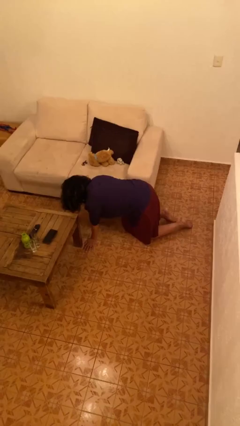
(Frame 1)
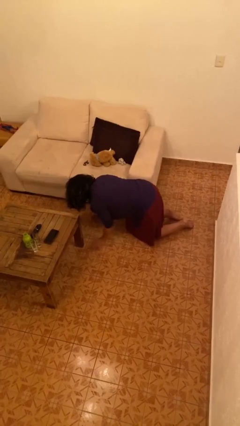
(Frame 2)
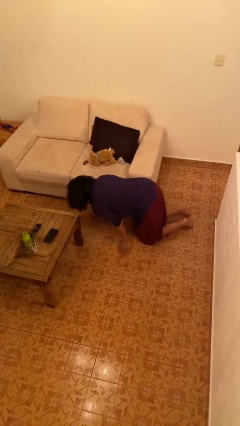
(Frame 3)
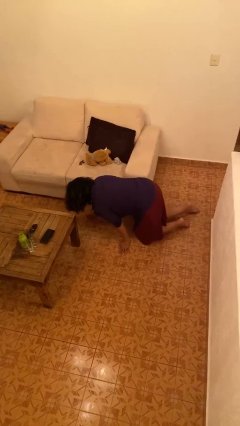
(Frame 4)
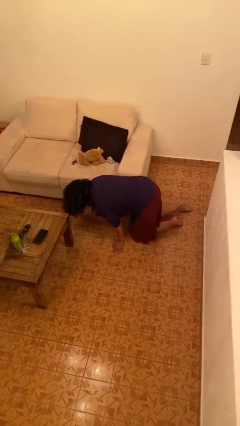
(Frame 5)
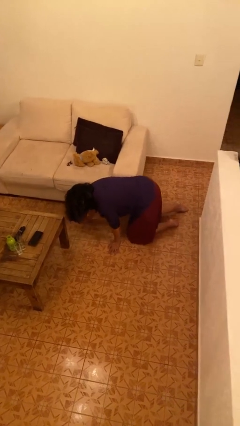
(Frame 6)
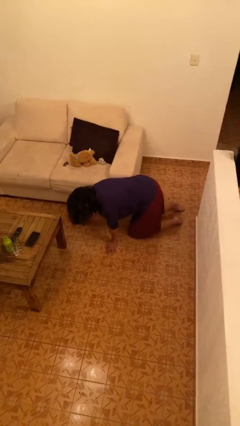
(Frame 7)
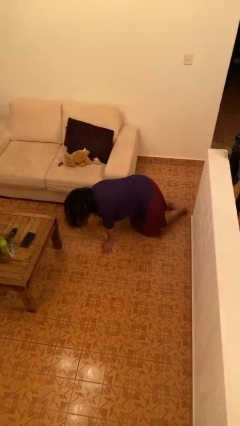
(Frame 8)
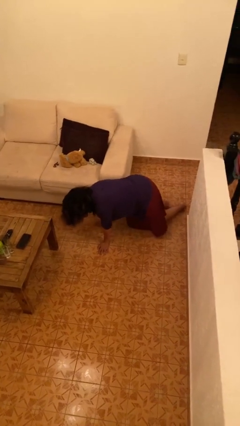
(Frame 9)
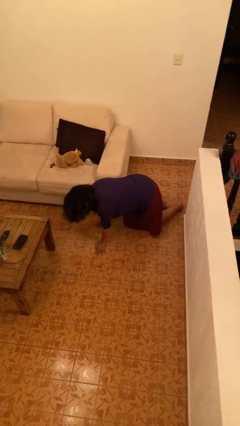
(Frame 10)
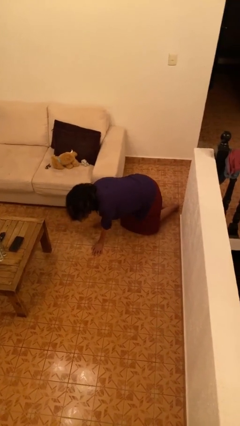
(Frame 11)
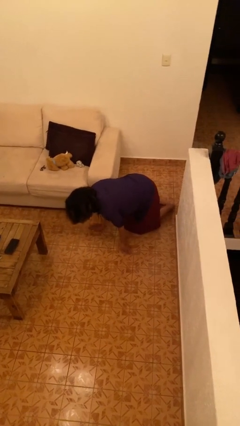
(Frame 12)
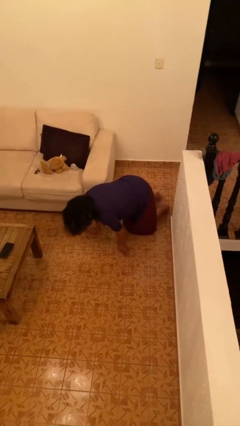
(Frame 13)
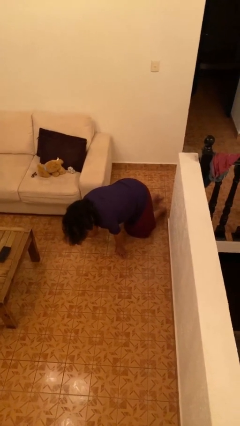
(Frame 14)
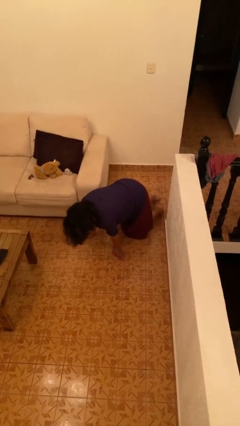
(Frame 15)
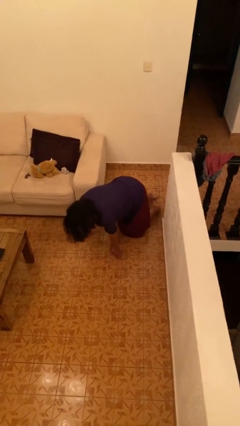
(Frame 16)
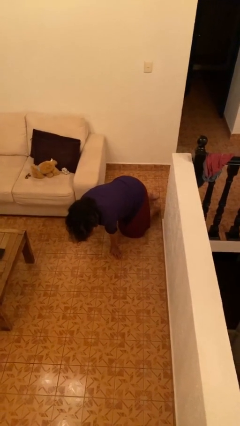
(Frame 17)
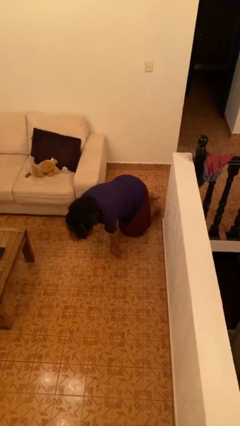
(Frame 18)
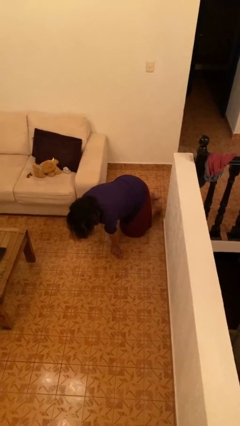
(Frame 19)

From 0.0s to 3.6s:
person crawls

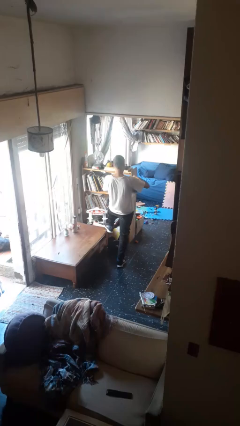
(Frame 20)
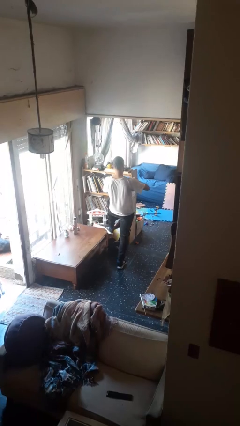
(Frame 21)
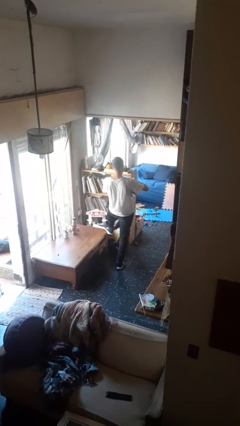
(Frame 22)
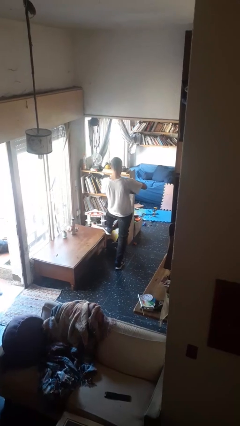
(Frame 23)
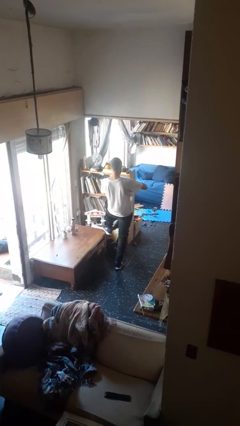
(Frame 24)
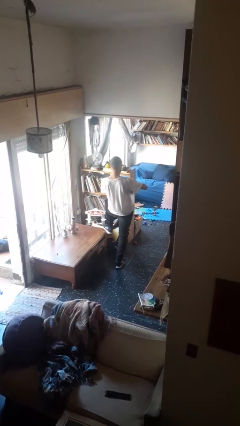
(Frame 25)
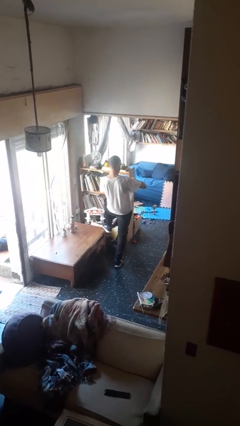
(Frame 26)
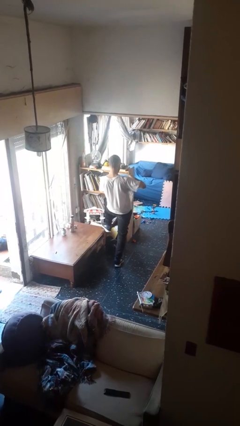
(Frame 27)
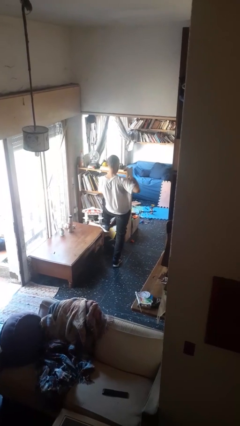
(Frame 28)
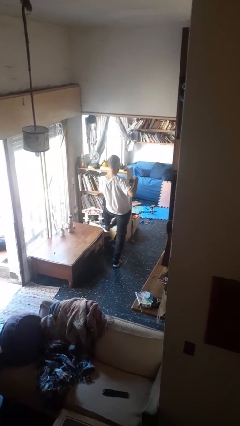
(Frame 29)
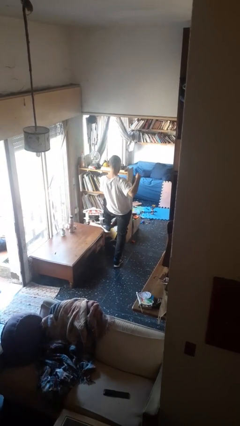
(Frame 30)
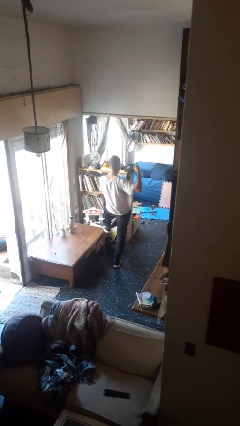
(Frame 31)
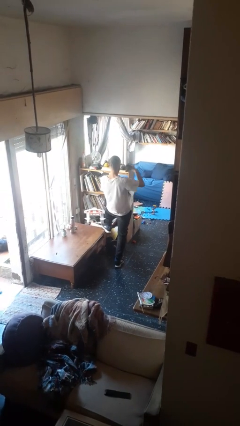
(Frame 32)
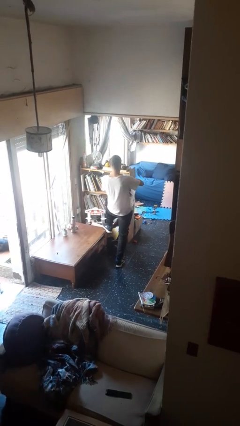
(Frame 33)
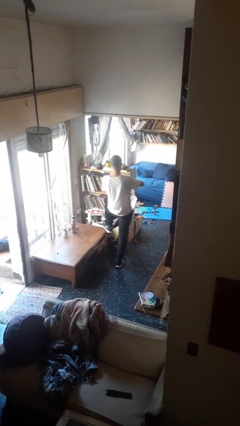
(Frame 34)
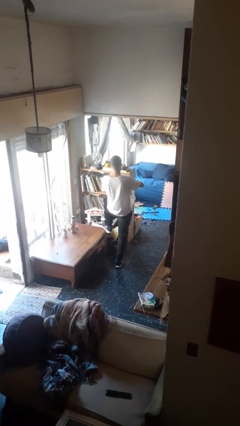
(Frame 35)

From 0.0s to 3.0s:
person tears paper

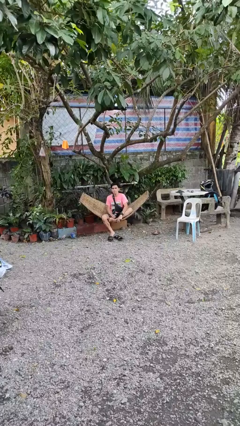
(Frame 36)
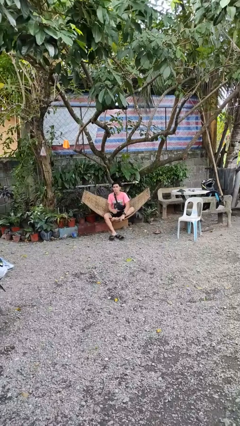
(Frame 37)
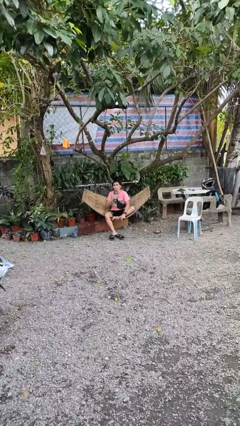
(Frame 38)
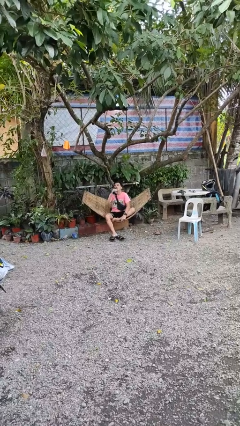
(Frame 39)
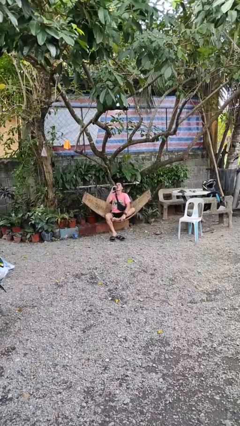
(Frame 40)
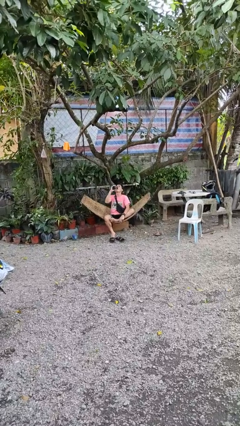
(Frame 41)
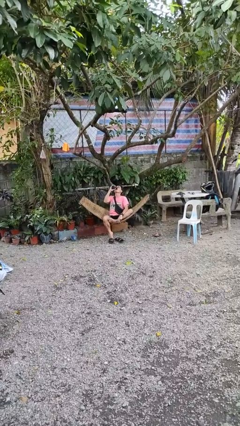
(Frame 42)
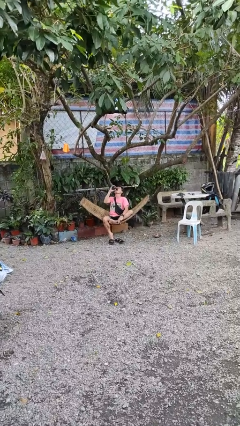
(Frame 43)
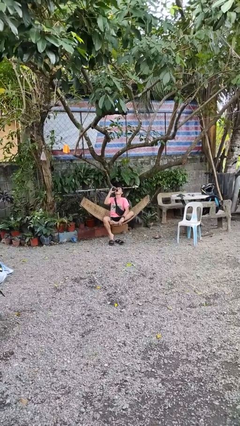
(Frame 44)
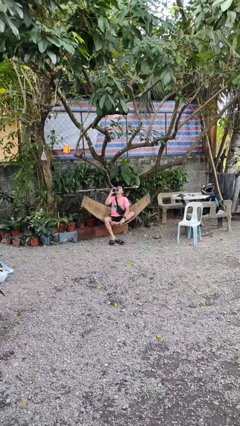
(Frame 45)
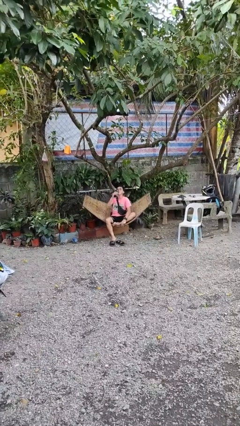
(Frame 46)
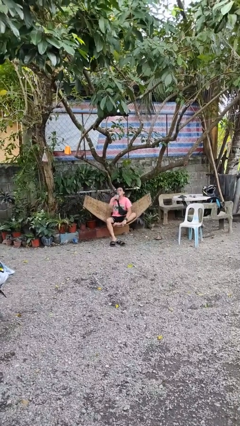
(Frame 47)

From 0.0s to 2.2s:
person drinks from bottle

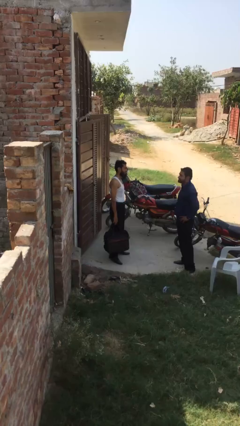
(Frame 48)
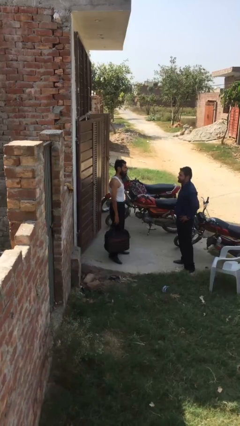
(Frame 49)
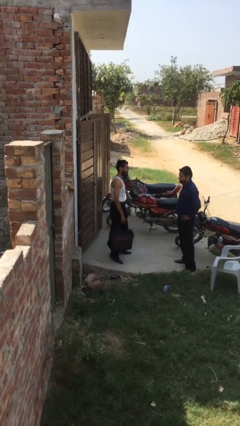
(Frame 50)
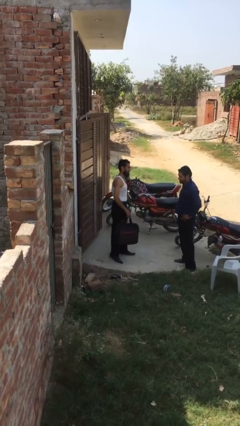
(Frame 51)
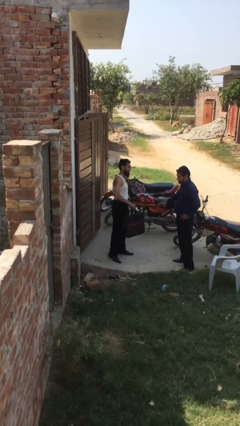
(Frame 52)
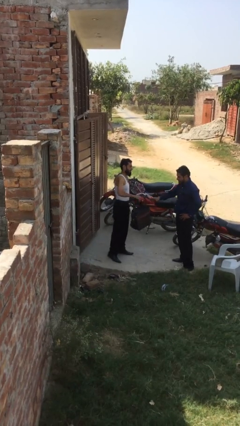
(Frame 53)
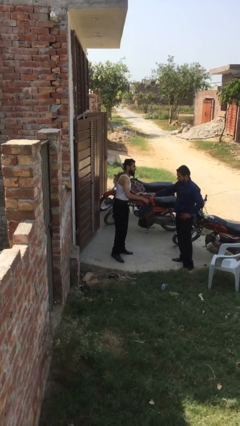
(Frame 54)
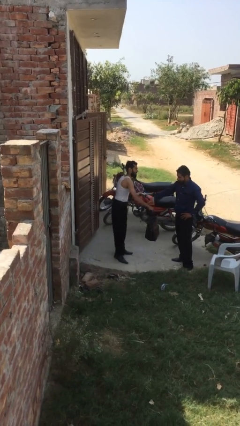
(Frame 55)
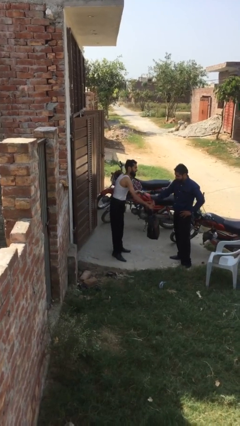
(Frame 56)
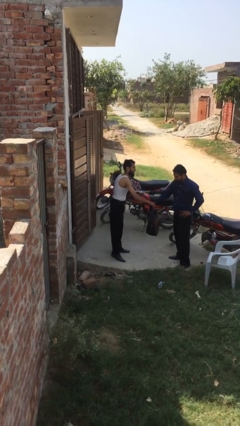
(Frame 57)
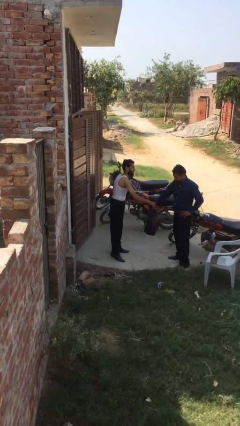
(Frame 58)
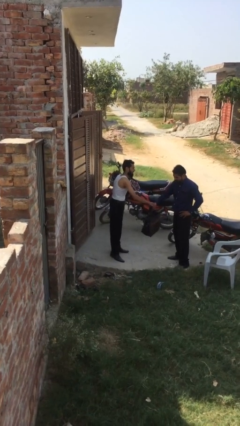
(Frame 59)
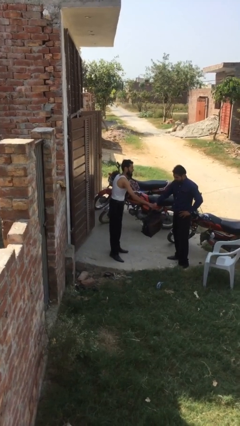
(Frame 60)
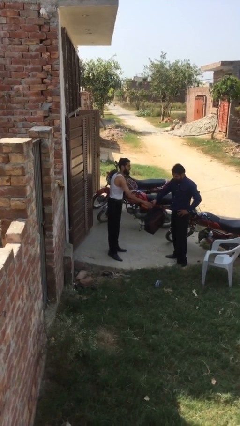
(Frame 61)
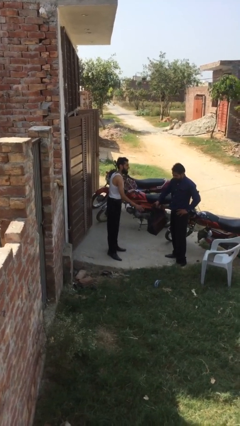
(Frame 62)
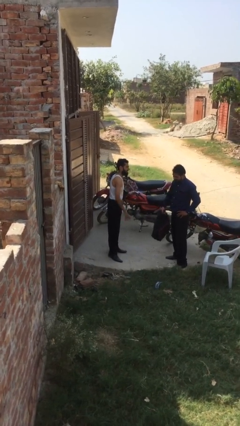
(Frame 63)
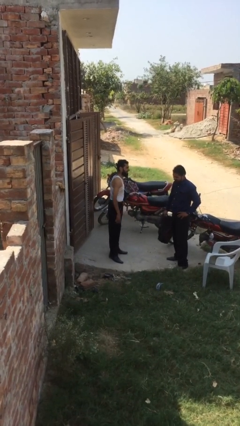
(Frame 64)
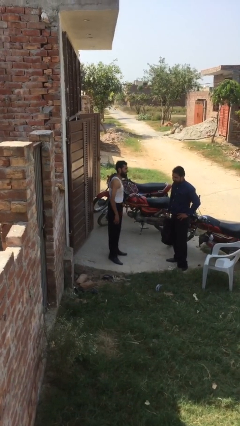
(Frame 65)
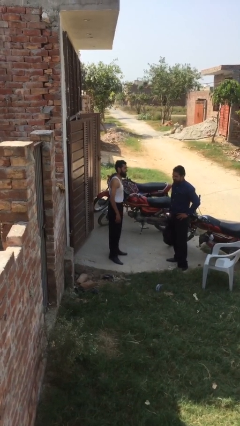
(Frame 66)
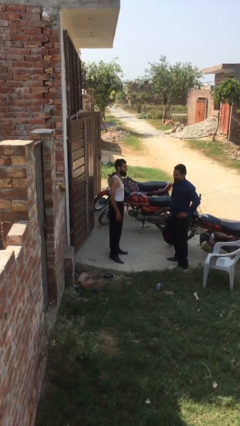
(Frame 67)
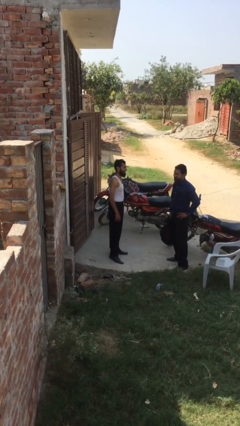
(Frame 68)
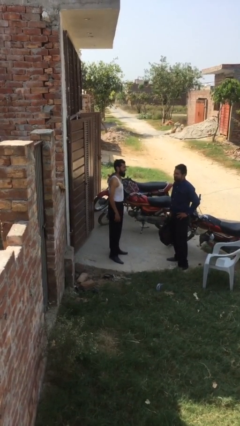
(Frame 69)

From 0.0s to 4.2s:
person transfers object to person

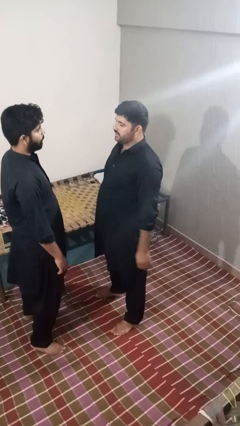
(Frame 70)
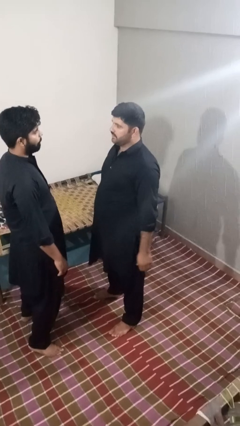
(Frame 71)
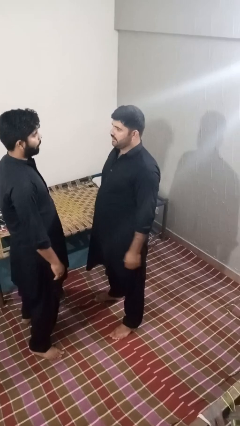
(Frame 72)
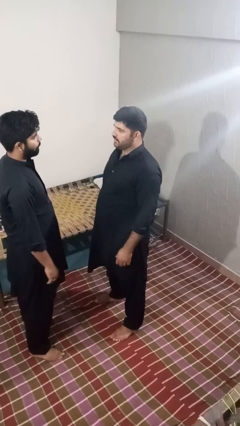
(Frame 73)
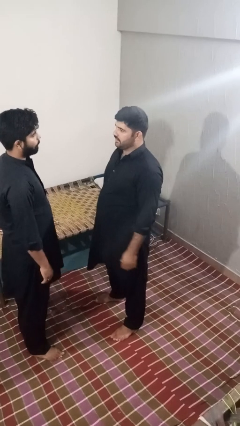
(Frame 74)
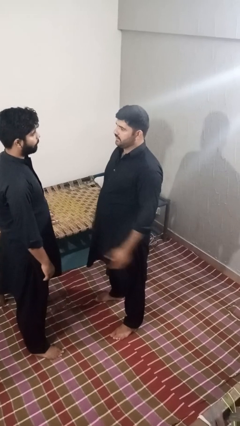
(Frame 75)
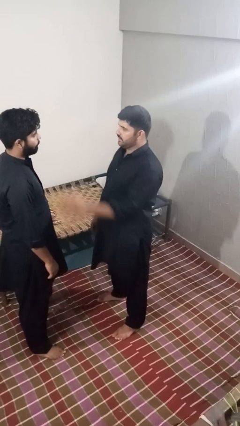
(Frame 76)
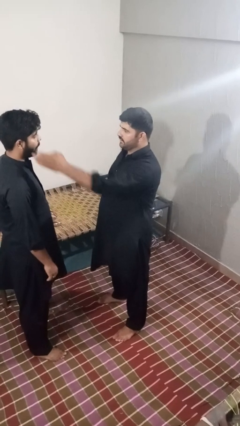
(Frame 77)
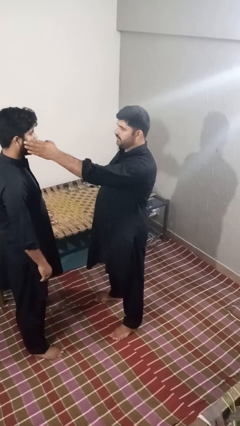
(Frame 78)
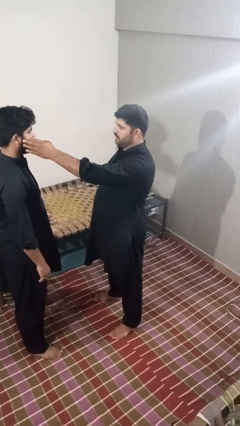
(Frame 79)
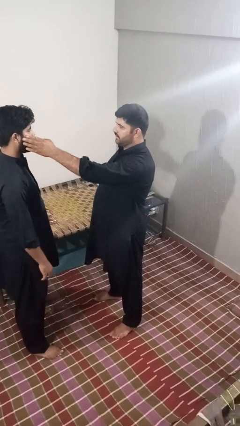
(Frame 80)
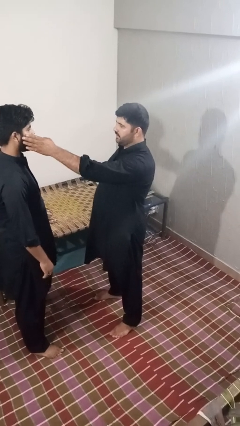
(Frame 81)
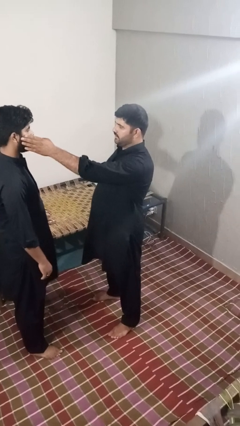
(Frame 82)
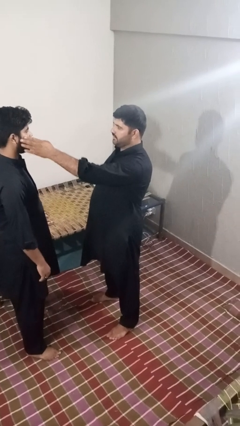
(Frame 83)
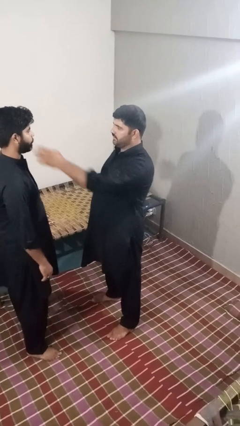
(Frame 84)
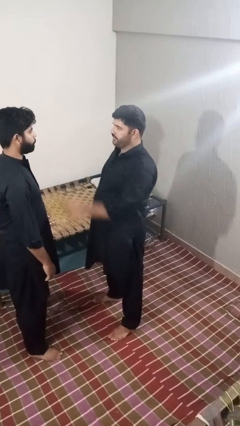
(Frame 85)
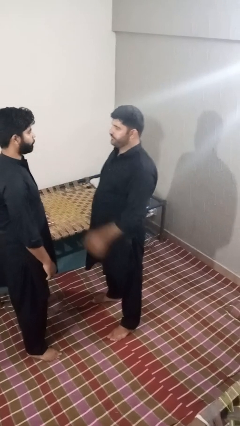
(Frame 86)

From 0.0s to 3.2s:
person touches face of person

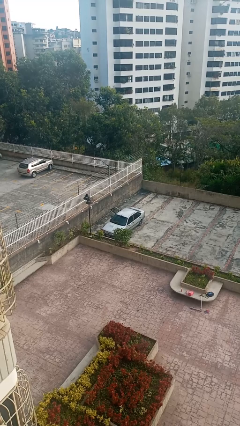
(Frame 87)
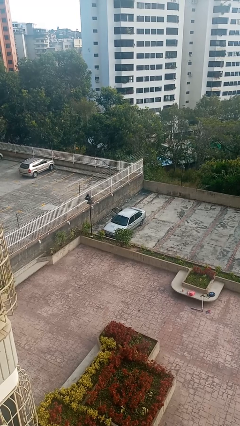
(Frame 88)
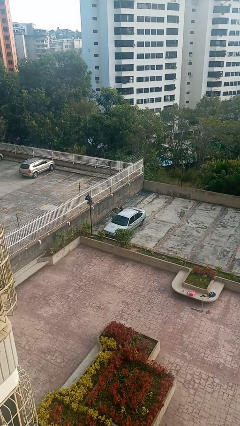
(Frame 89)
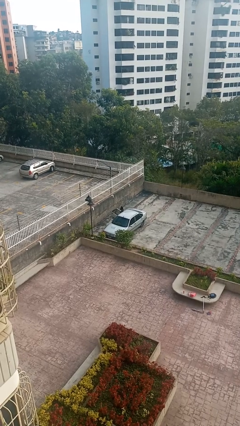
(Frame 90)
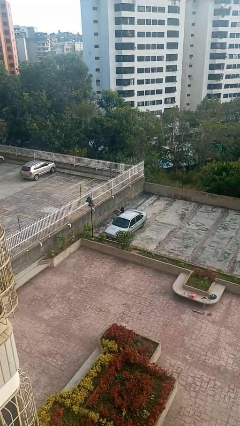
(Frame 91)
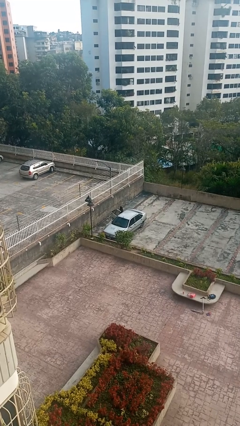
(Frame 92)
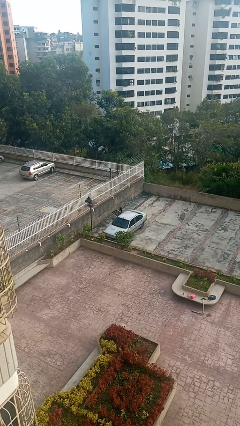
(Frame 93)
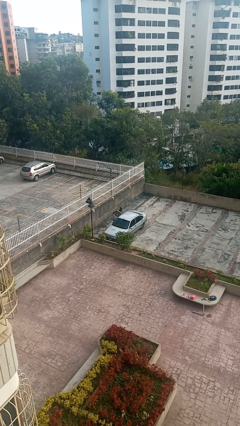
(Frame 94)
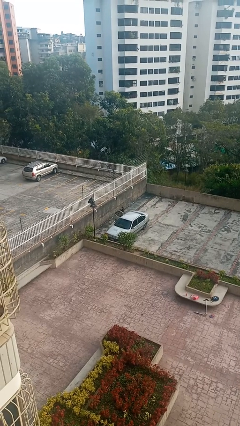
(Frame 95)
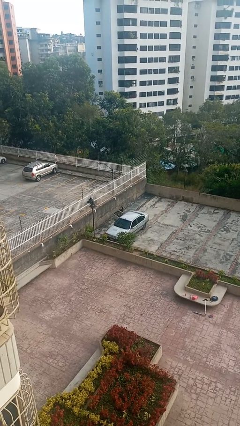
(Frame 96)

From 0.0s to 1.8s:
person exits car
